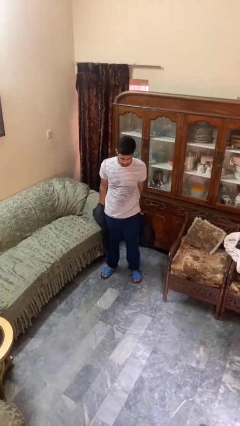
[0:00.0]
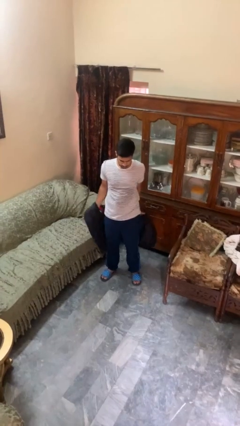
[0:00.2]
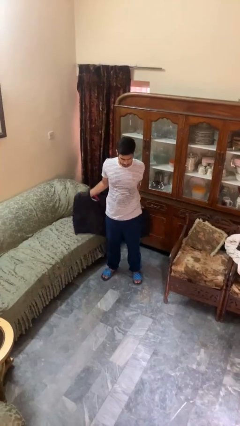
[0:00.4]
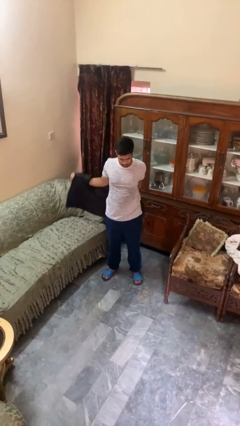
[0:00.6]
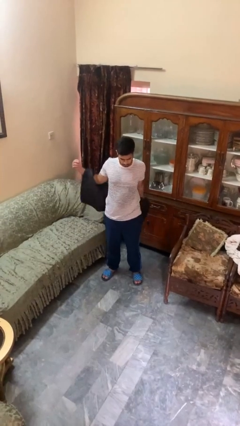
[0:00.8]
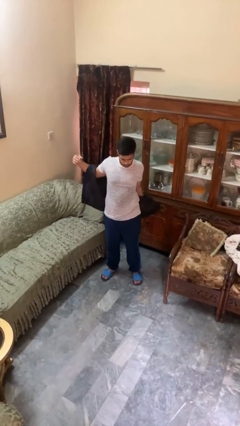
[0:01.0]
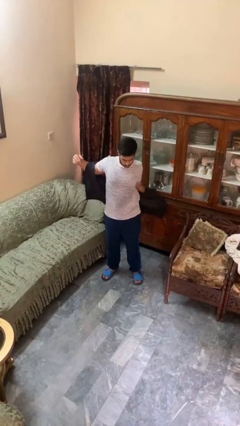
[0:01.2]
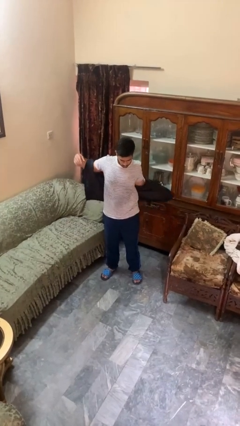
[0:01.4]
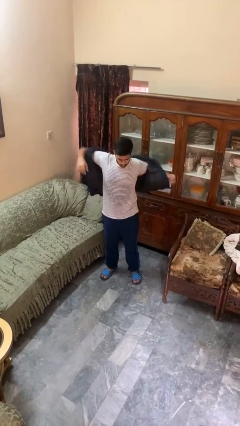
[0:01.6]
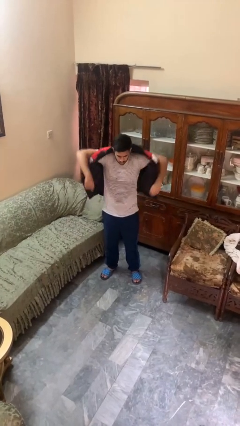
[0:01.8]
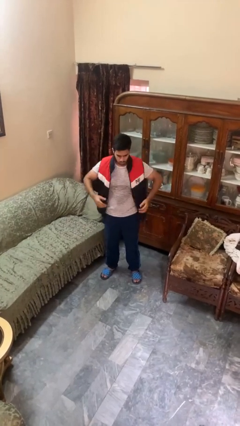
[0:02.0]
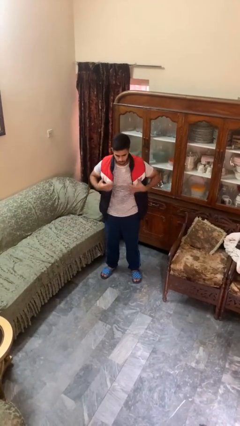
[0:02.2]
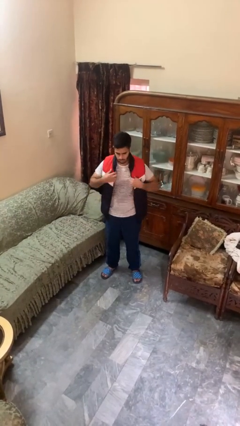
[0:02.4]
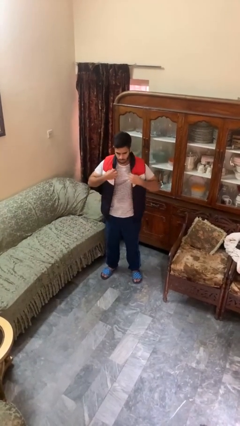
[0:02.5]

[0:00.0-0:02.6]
person puts on jacket

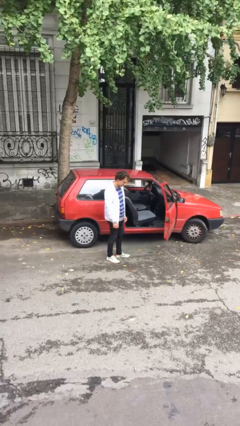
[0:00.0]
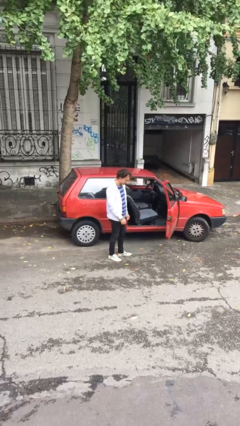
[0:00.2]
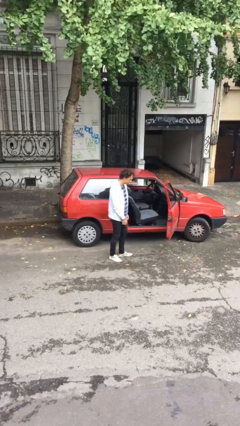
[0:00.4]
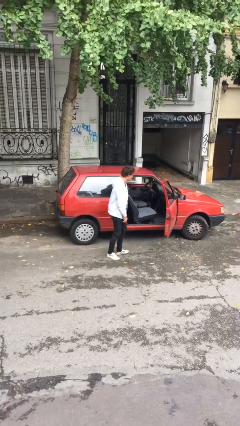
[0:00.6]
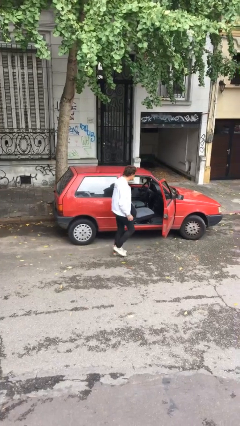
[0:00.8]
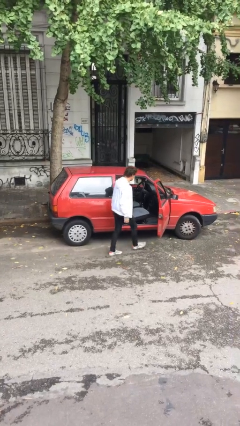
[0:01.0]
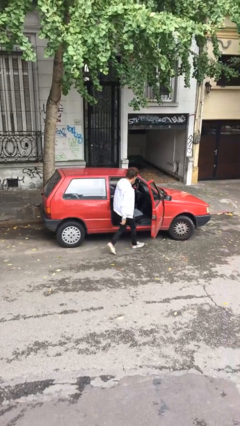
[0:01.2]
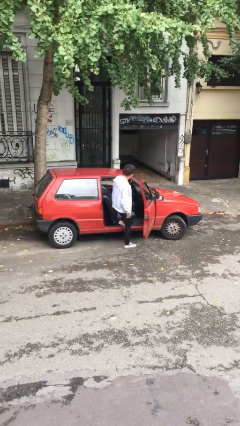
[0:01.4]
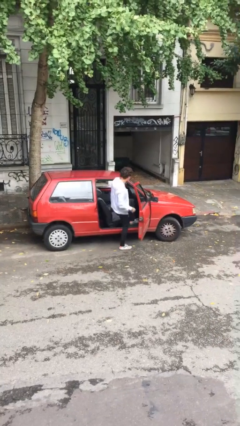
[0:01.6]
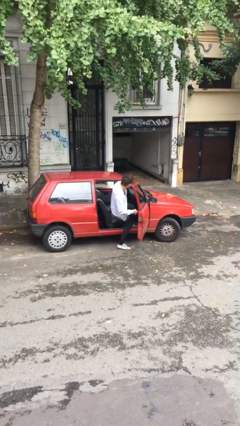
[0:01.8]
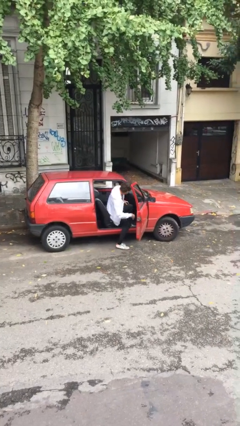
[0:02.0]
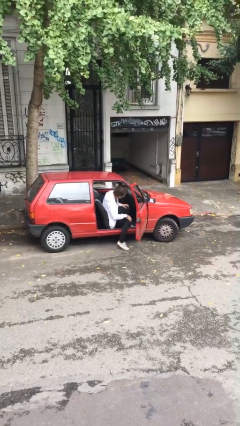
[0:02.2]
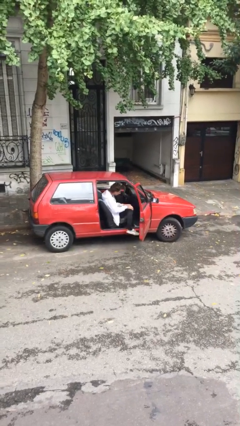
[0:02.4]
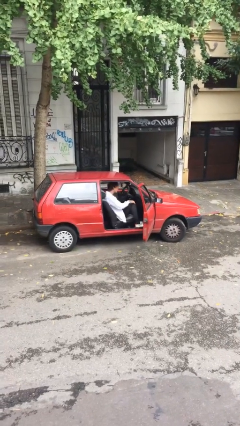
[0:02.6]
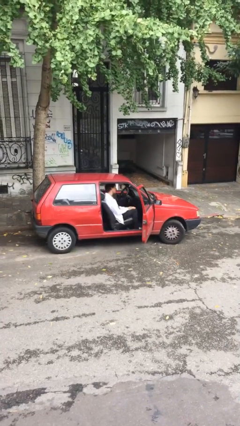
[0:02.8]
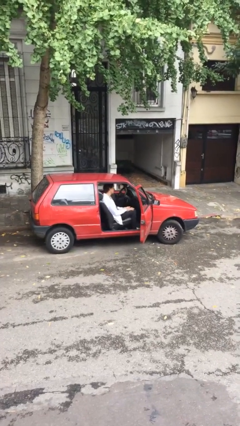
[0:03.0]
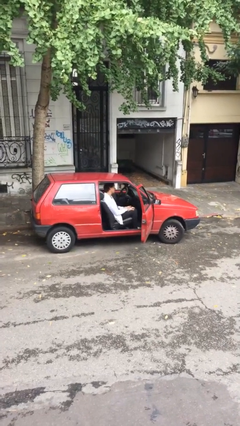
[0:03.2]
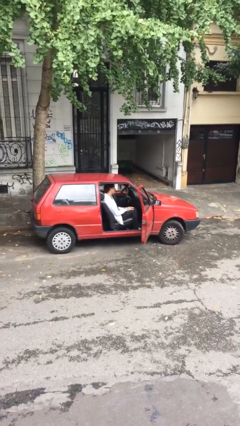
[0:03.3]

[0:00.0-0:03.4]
person enters car

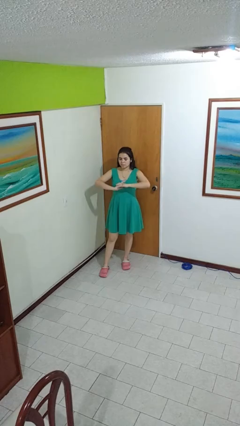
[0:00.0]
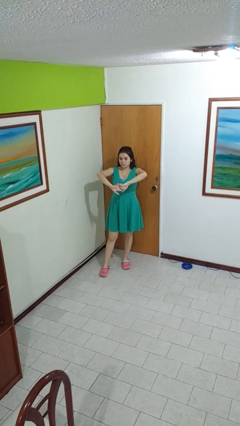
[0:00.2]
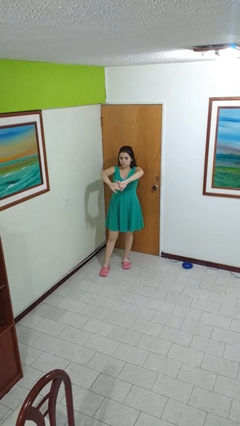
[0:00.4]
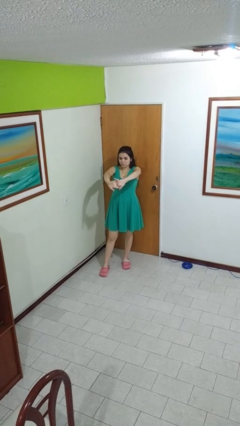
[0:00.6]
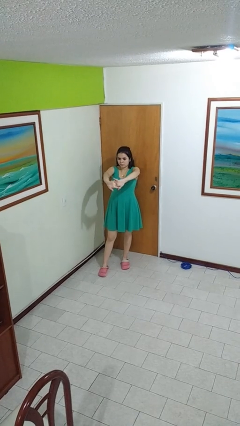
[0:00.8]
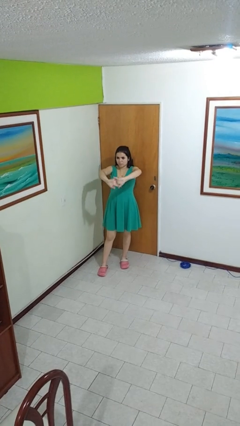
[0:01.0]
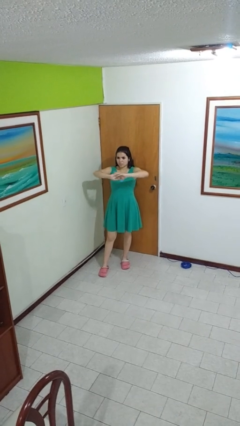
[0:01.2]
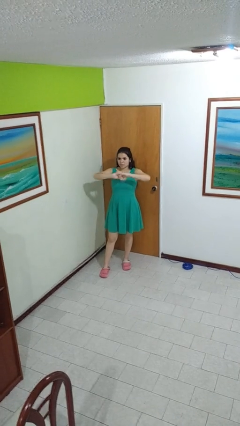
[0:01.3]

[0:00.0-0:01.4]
person cracks knuckles

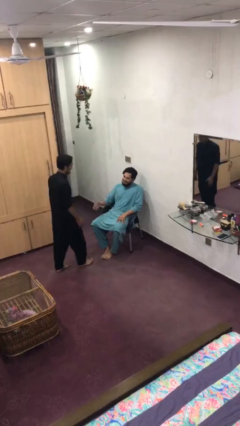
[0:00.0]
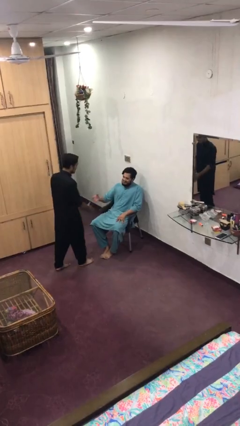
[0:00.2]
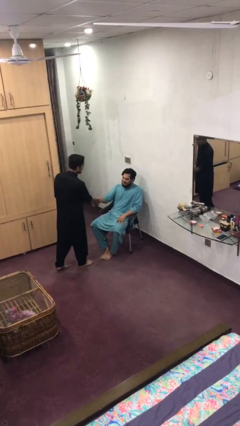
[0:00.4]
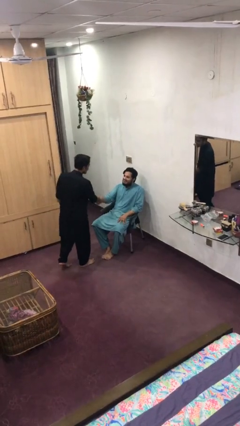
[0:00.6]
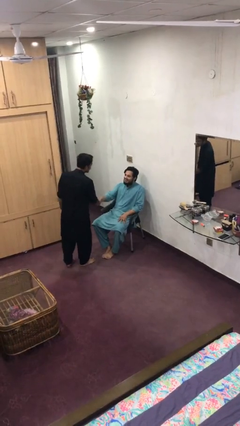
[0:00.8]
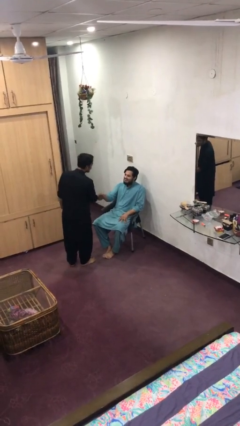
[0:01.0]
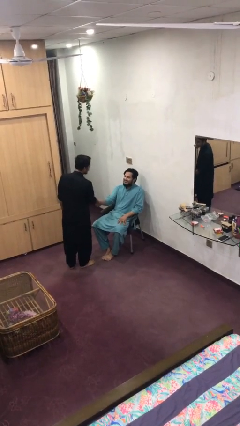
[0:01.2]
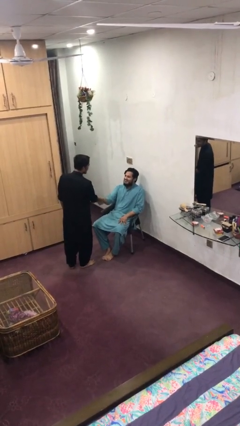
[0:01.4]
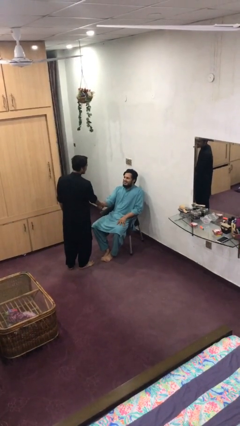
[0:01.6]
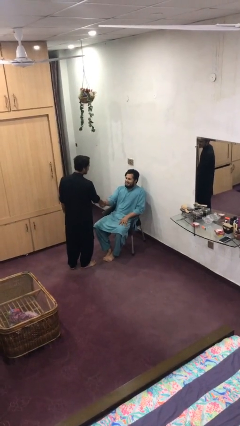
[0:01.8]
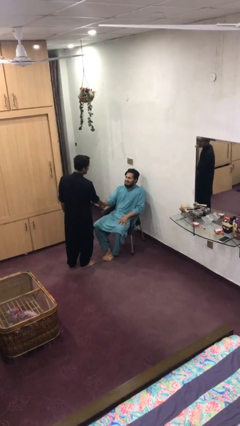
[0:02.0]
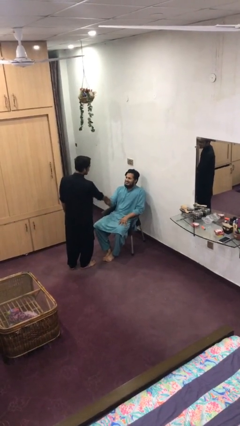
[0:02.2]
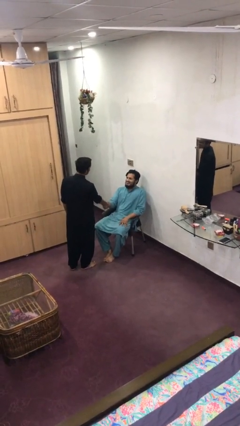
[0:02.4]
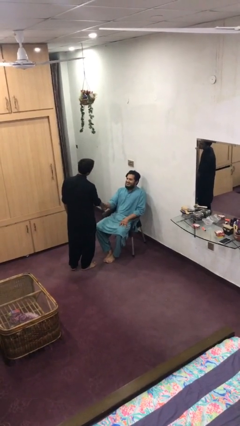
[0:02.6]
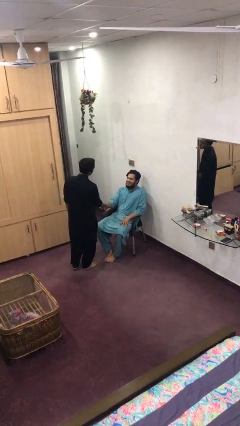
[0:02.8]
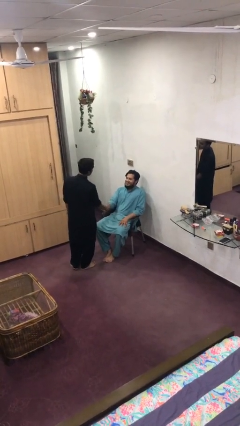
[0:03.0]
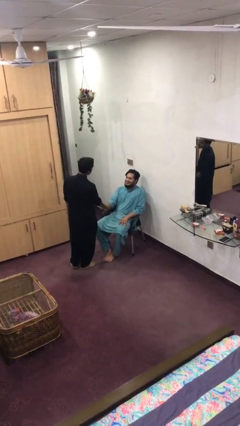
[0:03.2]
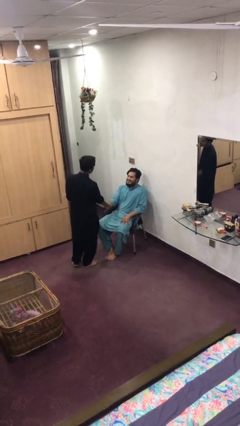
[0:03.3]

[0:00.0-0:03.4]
person shakes hand

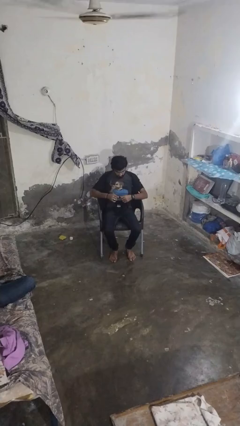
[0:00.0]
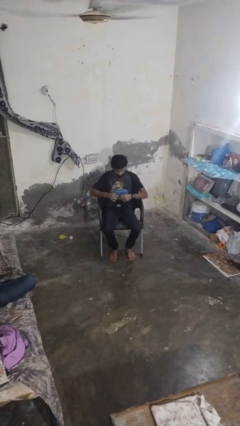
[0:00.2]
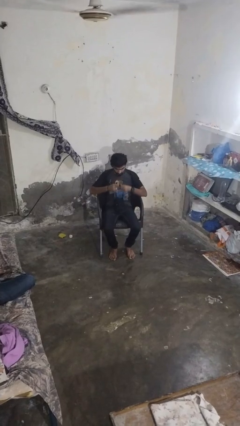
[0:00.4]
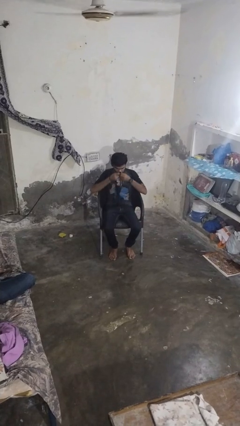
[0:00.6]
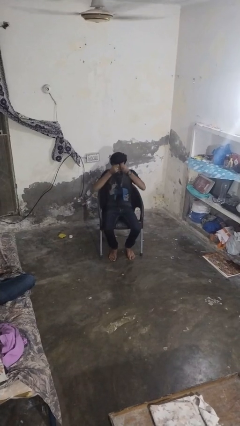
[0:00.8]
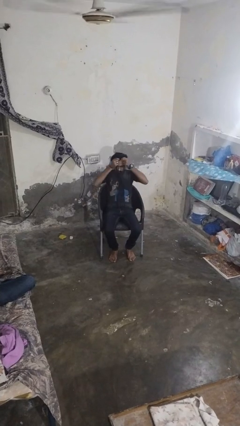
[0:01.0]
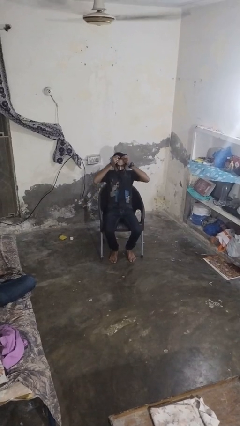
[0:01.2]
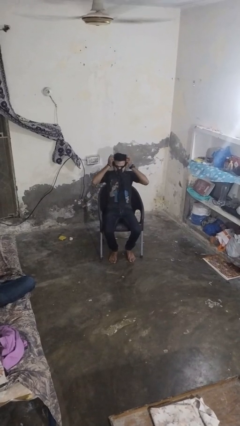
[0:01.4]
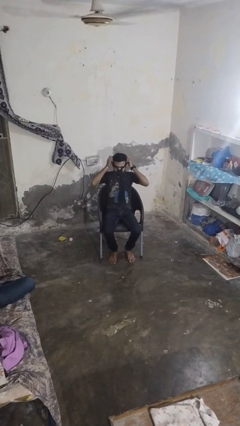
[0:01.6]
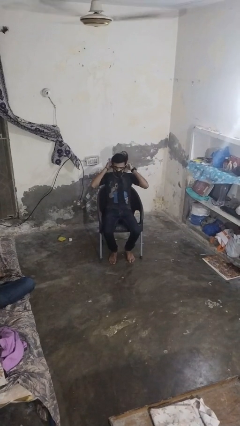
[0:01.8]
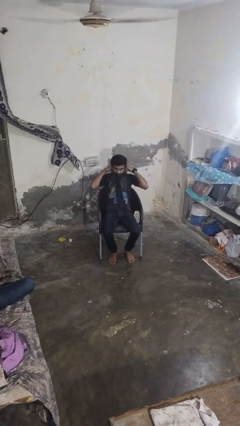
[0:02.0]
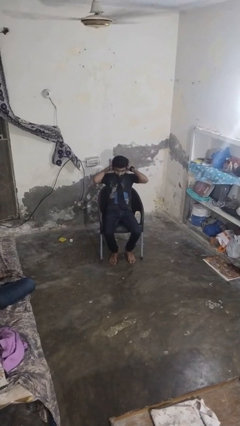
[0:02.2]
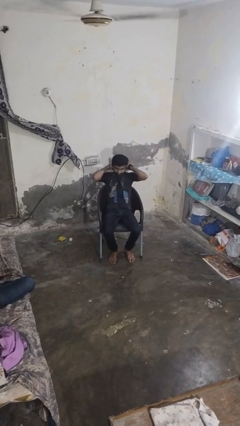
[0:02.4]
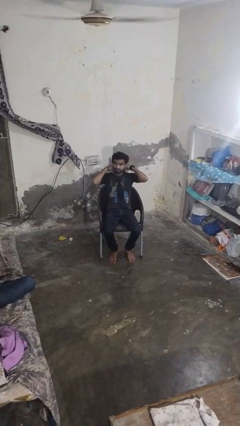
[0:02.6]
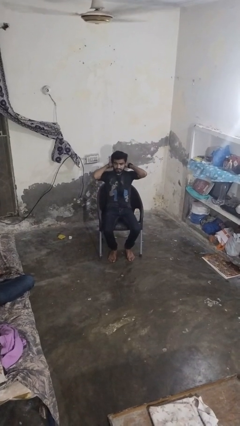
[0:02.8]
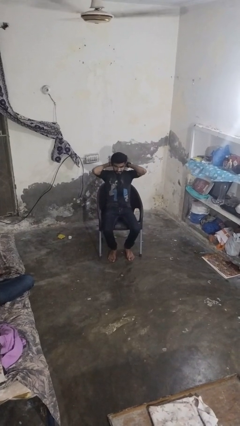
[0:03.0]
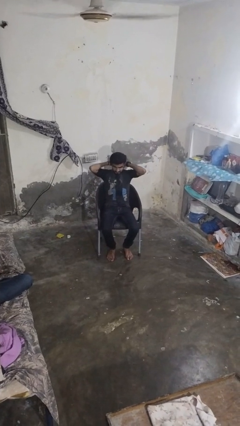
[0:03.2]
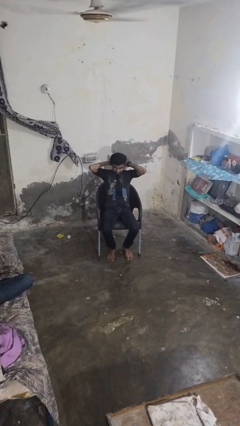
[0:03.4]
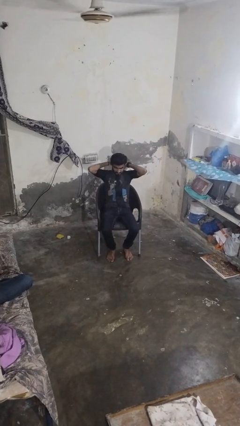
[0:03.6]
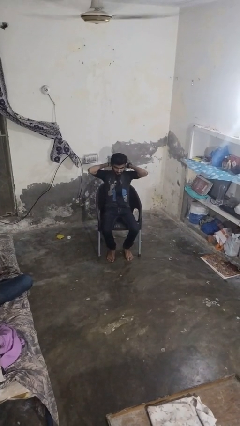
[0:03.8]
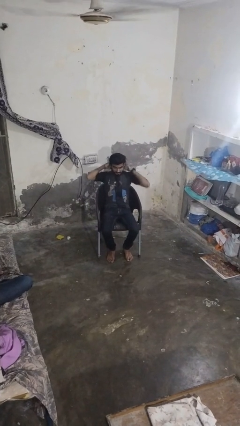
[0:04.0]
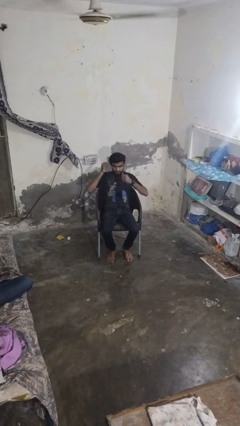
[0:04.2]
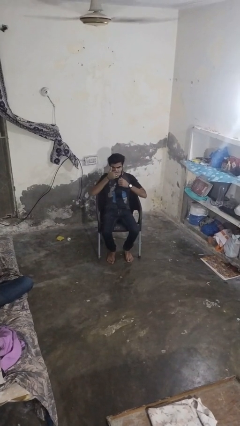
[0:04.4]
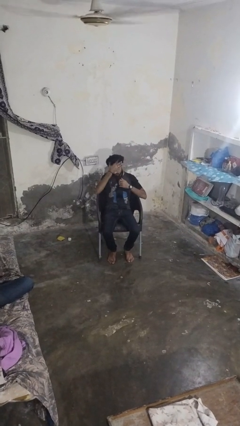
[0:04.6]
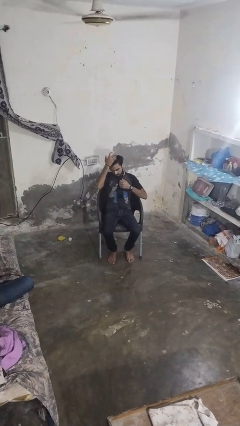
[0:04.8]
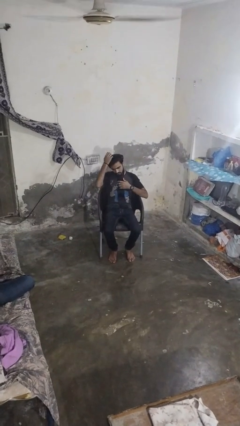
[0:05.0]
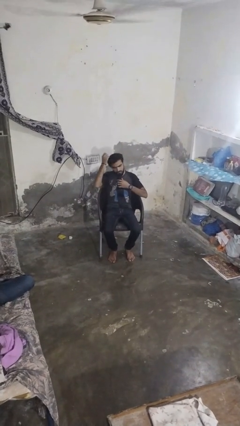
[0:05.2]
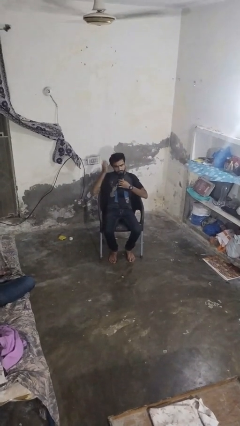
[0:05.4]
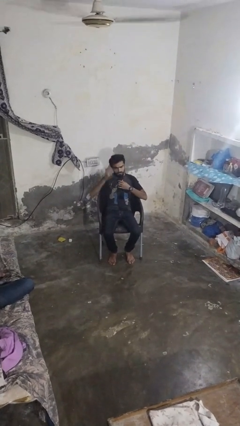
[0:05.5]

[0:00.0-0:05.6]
person puts on necktie

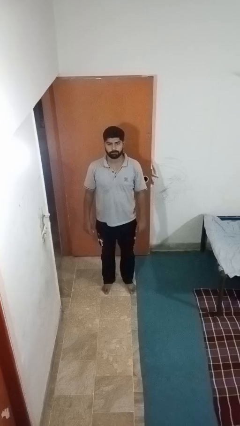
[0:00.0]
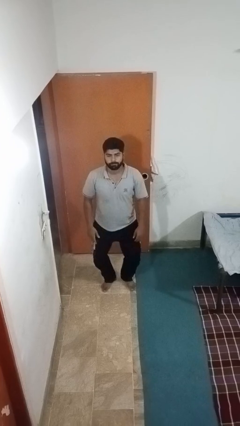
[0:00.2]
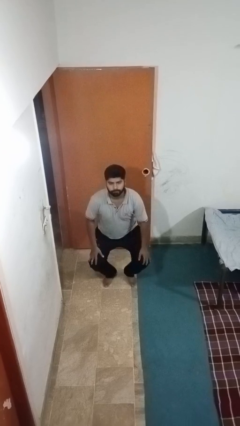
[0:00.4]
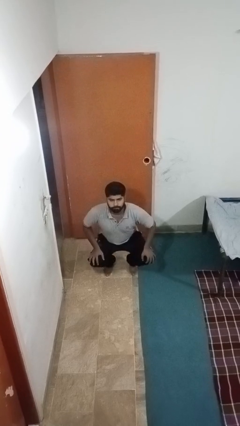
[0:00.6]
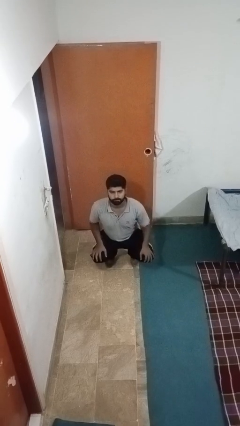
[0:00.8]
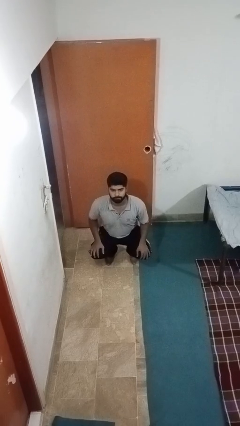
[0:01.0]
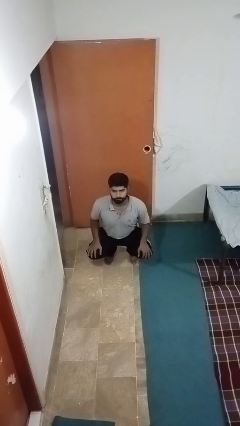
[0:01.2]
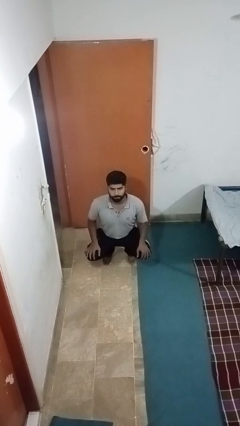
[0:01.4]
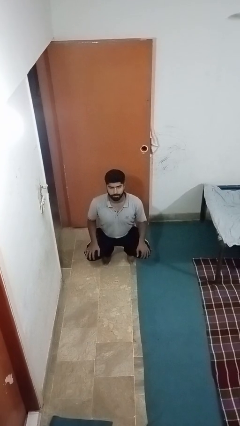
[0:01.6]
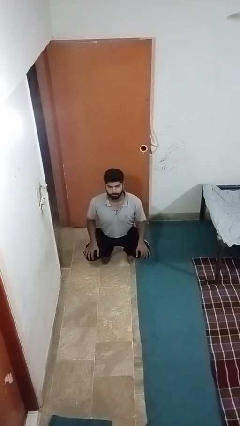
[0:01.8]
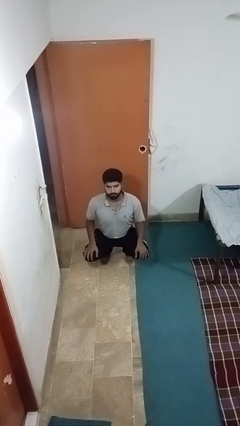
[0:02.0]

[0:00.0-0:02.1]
person squats
